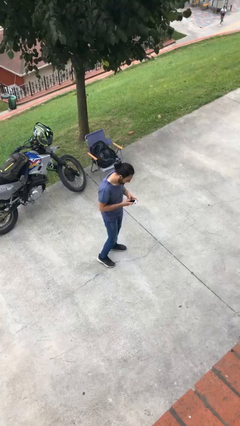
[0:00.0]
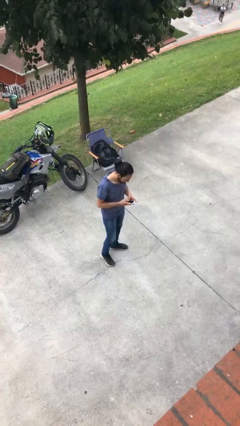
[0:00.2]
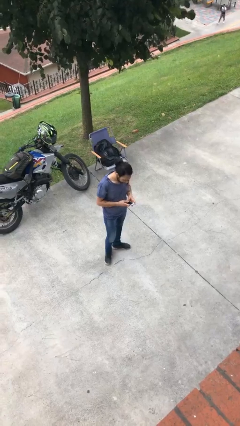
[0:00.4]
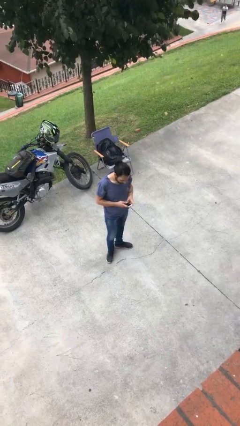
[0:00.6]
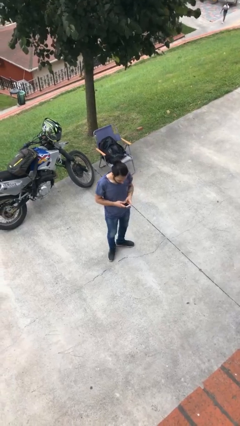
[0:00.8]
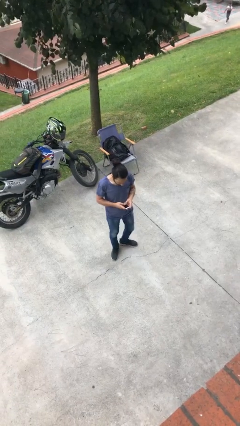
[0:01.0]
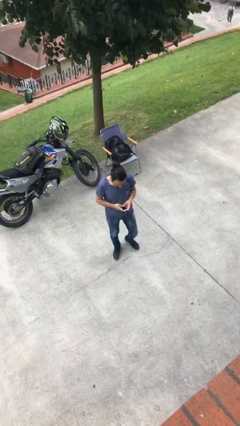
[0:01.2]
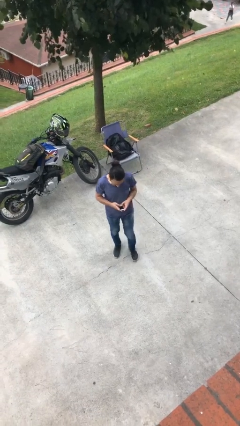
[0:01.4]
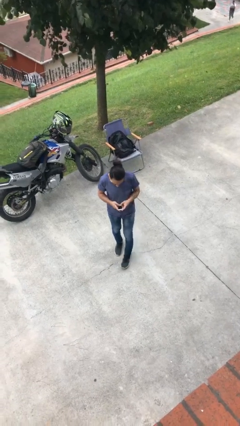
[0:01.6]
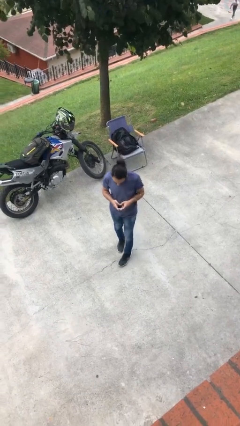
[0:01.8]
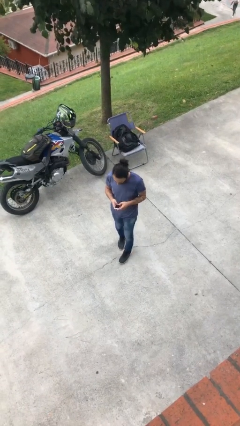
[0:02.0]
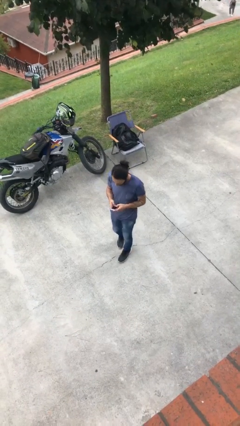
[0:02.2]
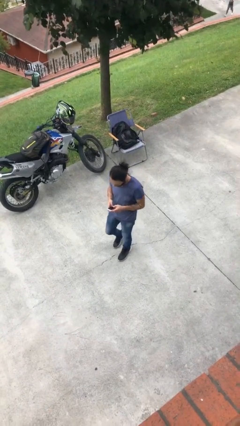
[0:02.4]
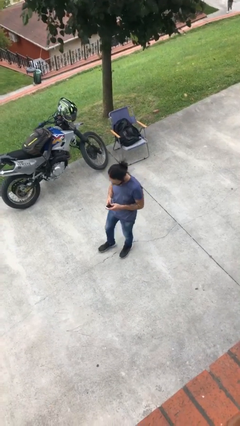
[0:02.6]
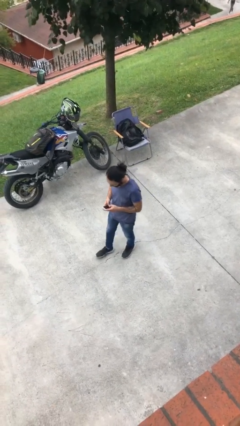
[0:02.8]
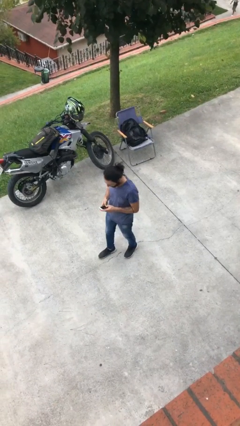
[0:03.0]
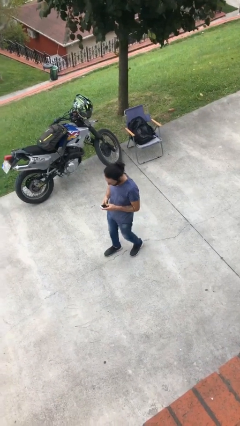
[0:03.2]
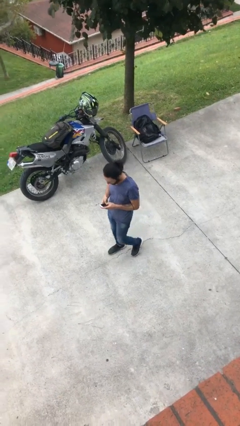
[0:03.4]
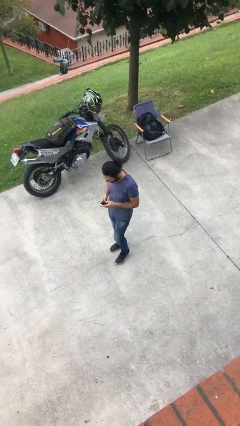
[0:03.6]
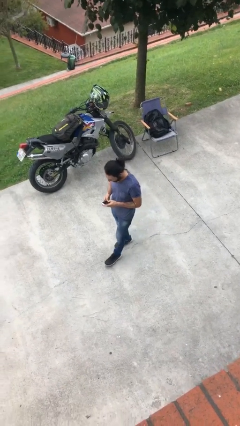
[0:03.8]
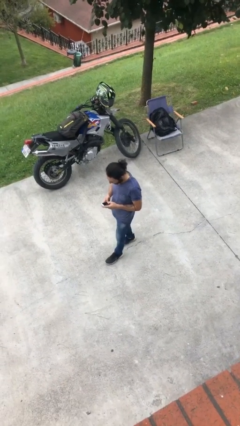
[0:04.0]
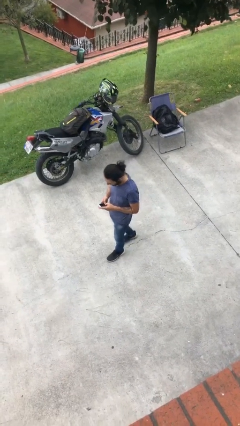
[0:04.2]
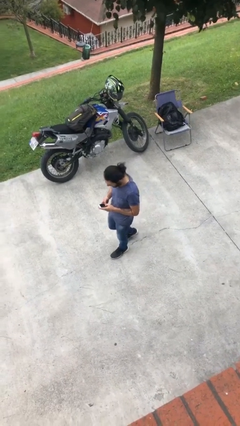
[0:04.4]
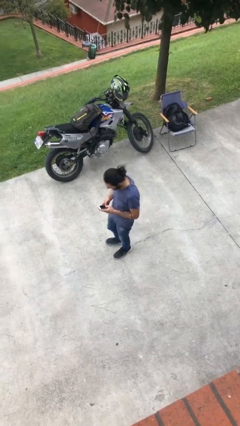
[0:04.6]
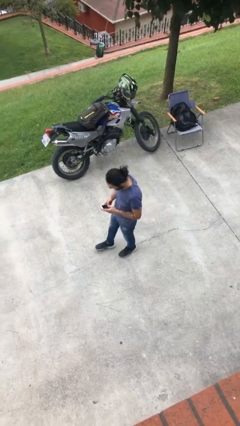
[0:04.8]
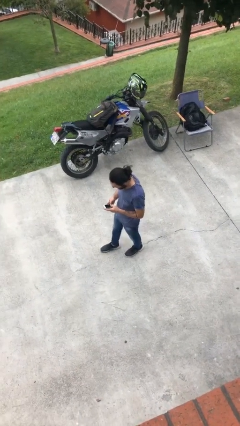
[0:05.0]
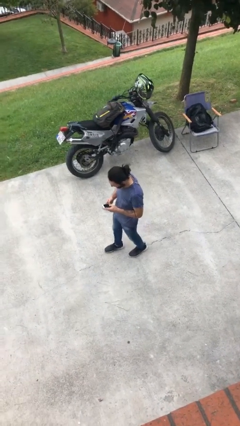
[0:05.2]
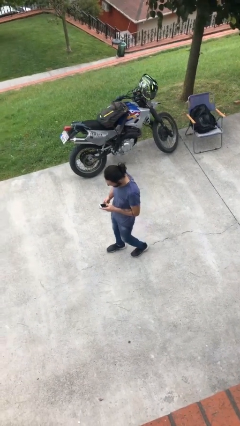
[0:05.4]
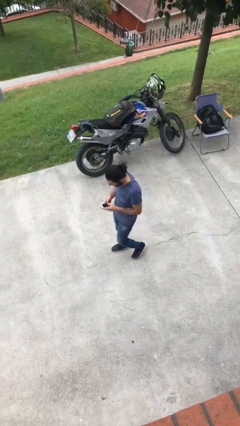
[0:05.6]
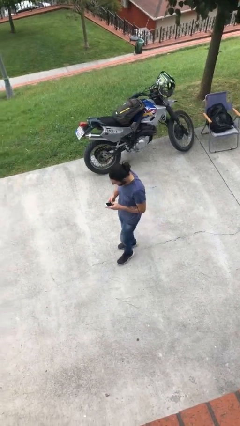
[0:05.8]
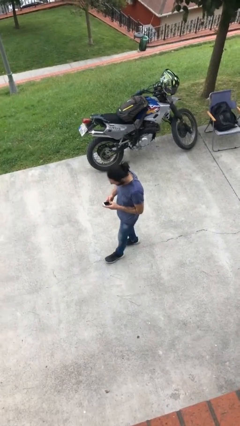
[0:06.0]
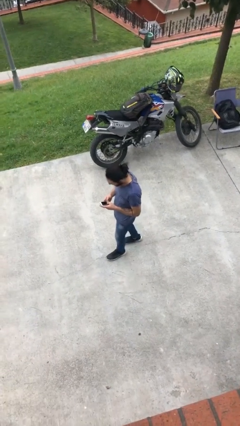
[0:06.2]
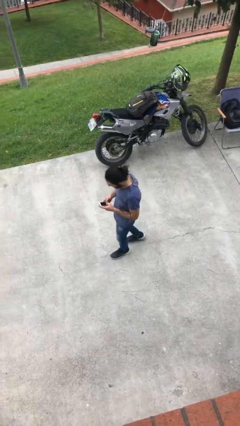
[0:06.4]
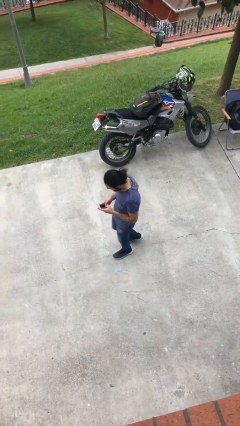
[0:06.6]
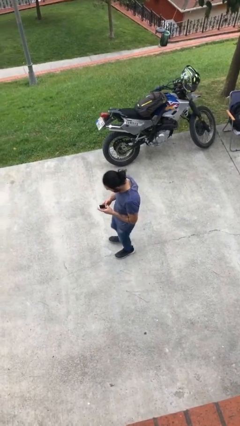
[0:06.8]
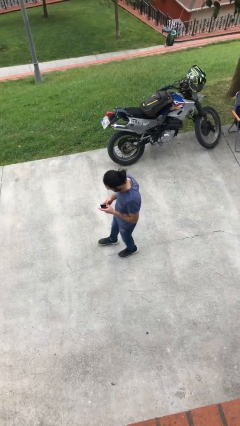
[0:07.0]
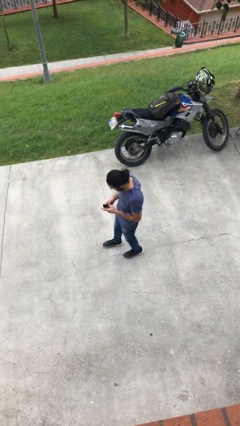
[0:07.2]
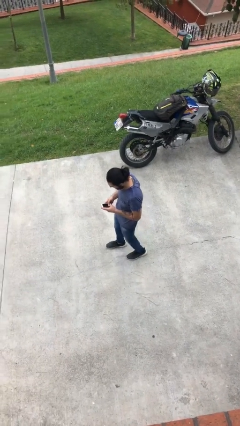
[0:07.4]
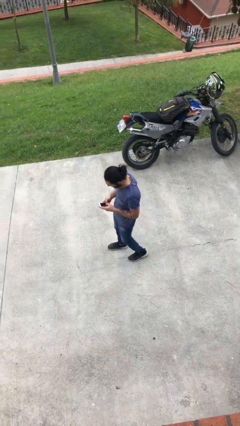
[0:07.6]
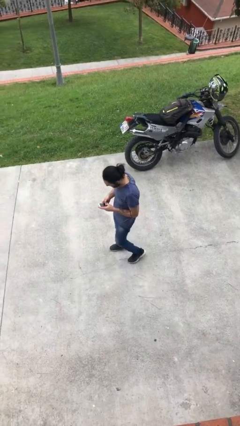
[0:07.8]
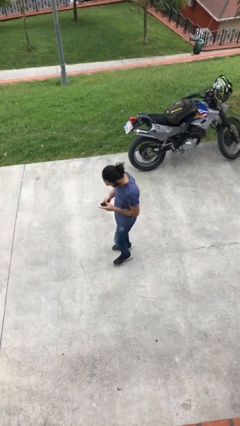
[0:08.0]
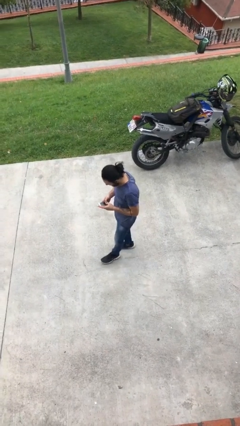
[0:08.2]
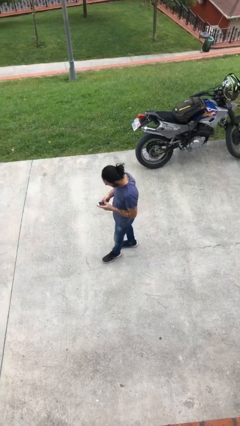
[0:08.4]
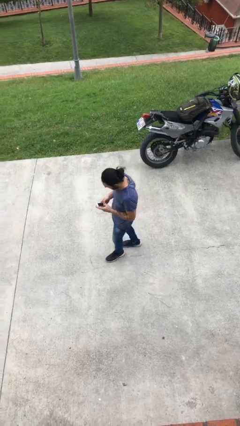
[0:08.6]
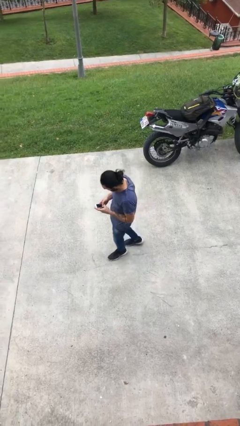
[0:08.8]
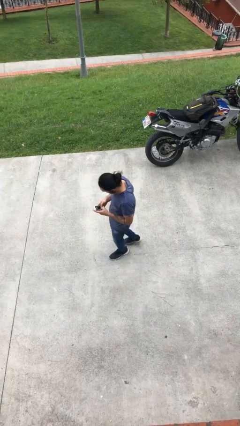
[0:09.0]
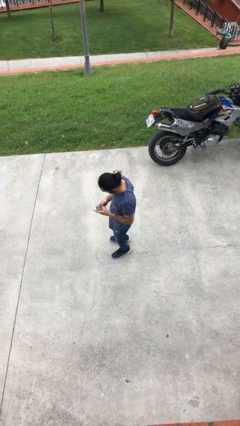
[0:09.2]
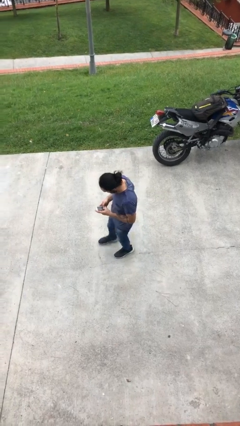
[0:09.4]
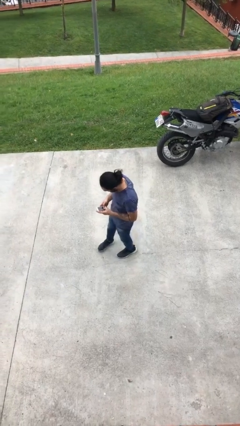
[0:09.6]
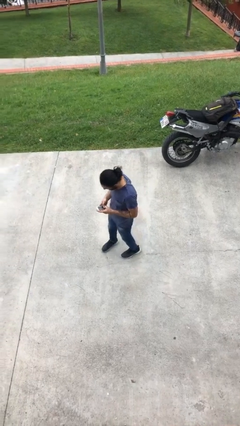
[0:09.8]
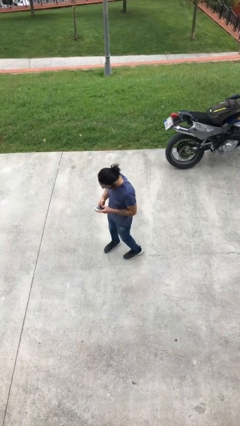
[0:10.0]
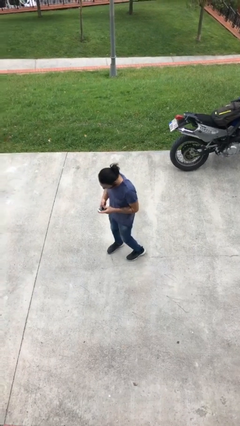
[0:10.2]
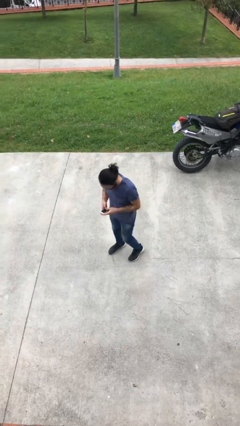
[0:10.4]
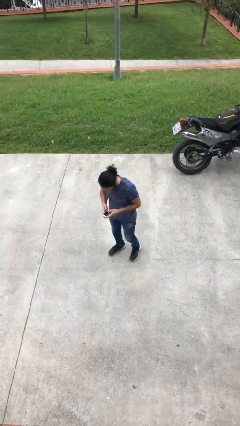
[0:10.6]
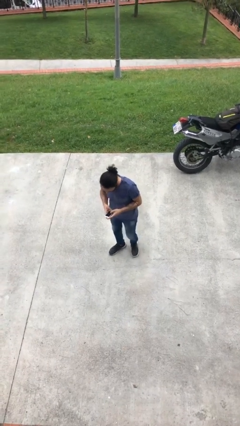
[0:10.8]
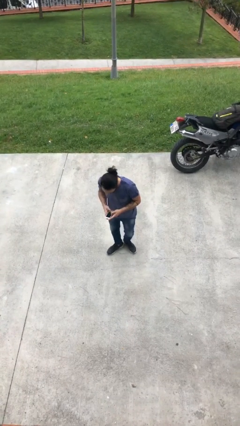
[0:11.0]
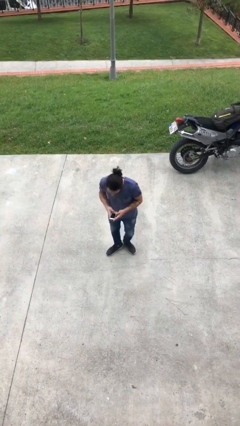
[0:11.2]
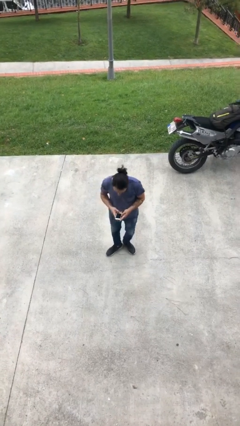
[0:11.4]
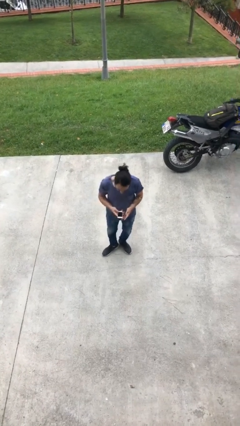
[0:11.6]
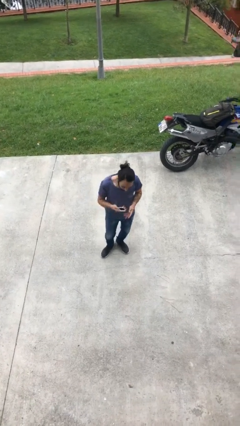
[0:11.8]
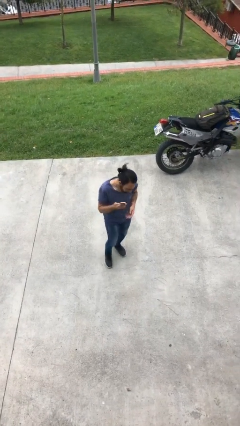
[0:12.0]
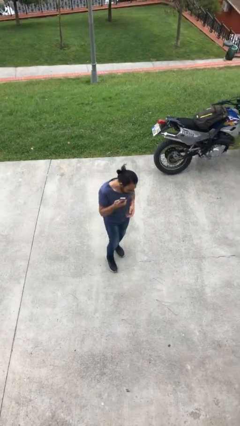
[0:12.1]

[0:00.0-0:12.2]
person texts on phone

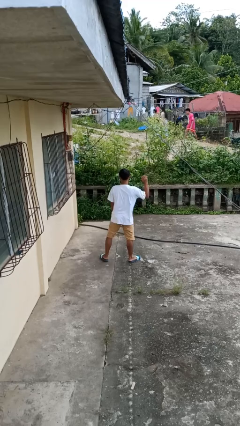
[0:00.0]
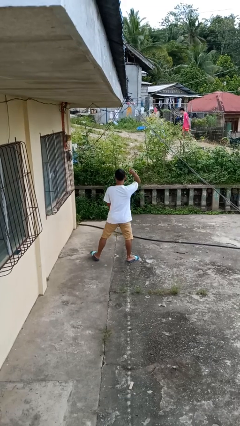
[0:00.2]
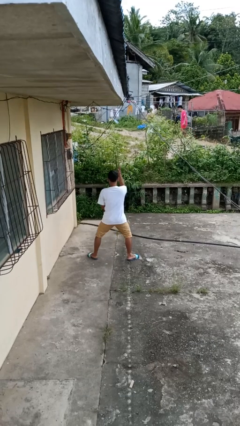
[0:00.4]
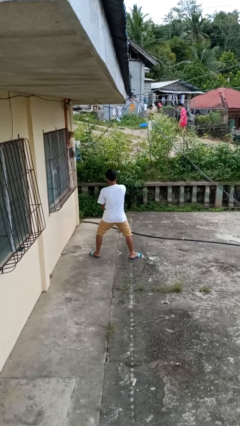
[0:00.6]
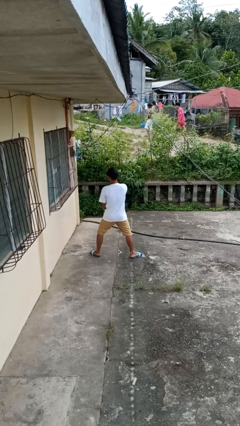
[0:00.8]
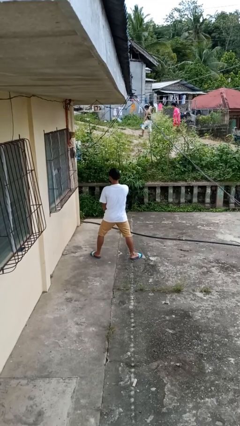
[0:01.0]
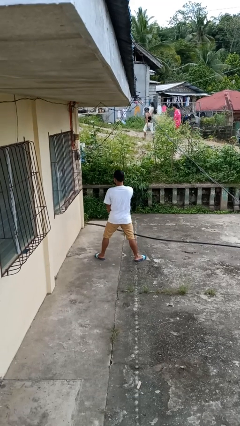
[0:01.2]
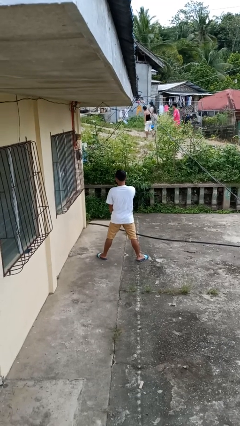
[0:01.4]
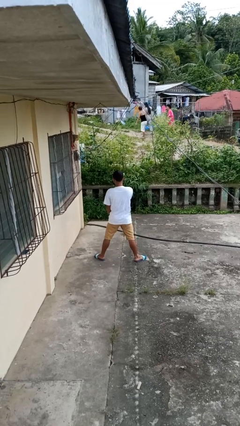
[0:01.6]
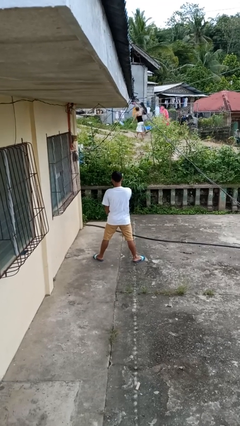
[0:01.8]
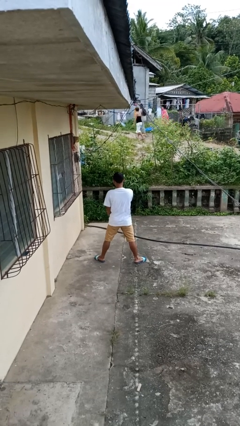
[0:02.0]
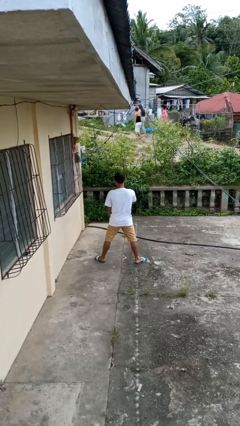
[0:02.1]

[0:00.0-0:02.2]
person karate chop

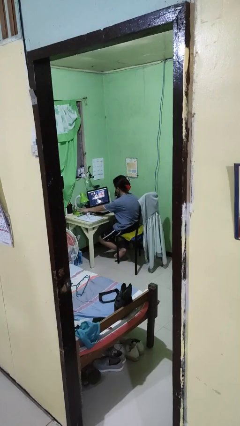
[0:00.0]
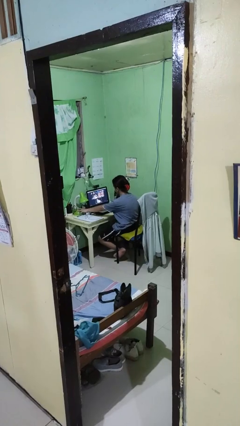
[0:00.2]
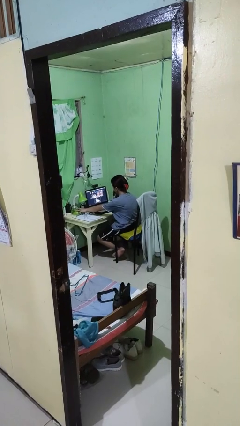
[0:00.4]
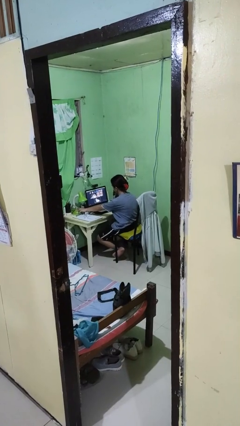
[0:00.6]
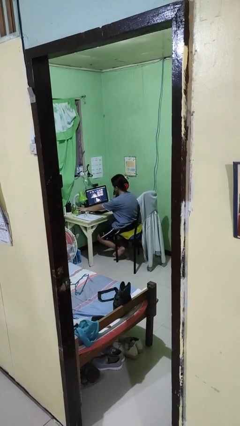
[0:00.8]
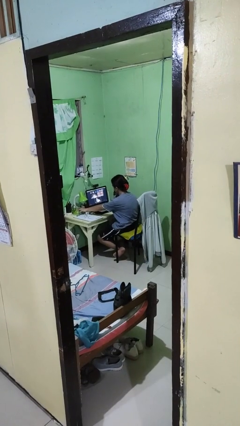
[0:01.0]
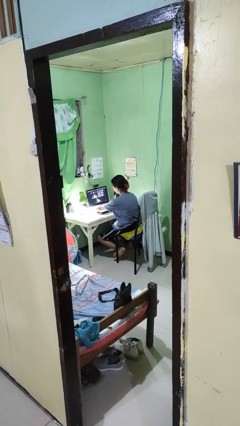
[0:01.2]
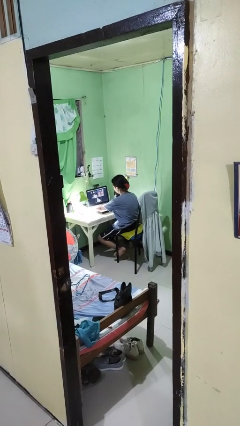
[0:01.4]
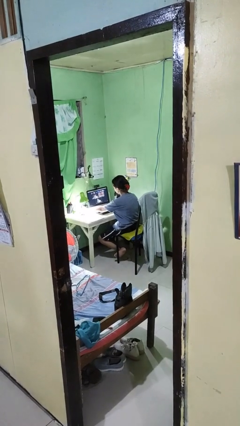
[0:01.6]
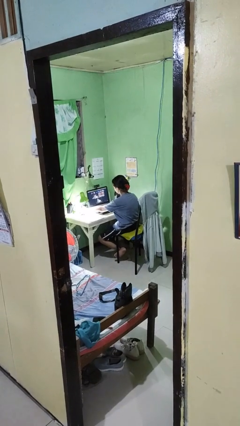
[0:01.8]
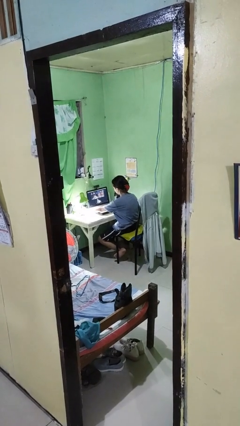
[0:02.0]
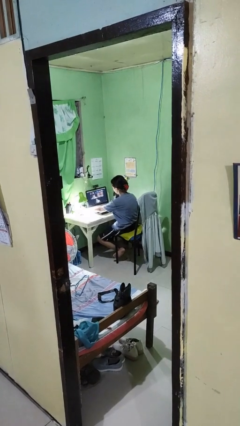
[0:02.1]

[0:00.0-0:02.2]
person turns on lamp

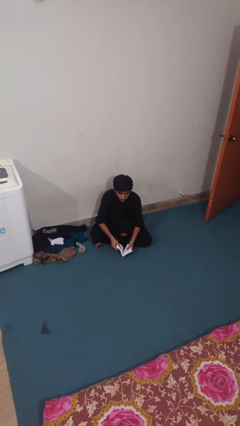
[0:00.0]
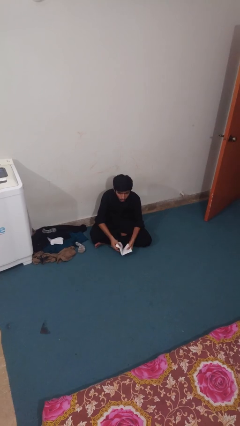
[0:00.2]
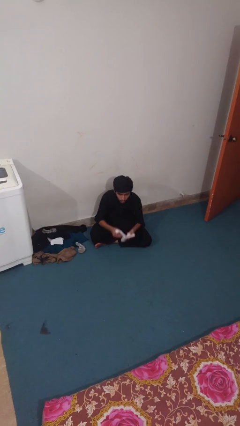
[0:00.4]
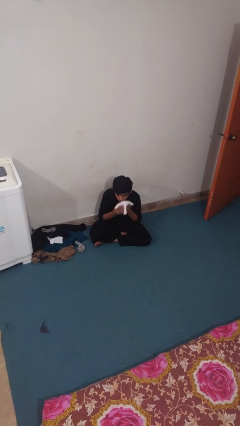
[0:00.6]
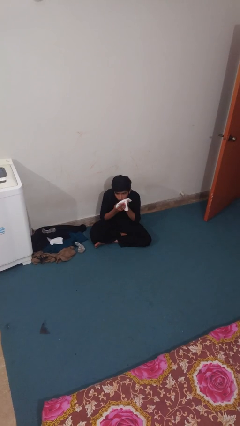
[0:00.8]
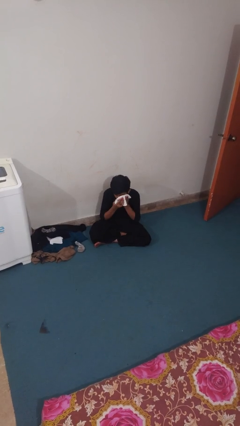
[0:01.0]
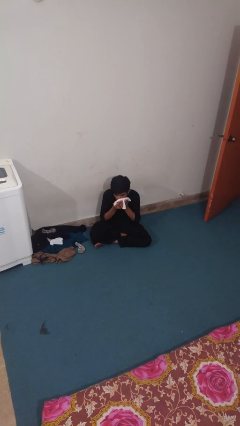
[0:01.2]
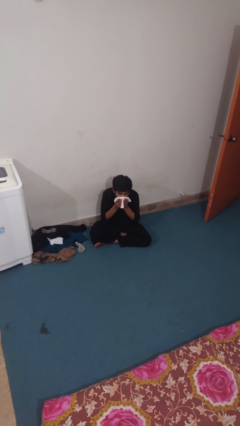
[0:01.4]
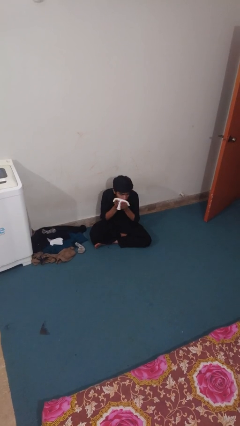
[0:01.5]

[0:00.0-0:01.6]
person wipes mouth with napkin
